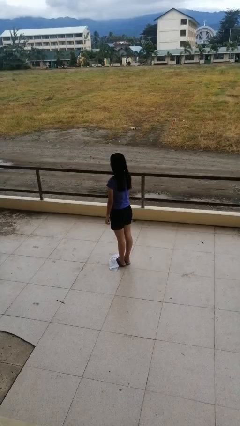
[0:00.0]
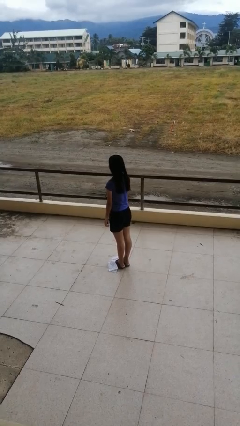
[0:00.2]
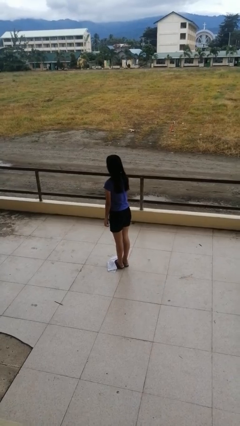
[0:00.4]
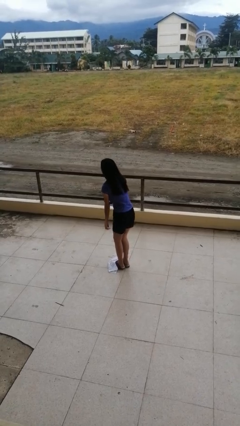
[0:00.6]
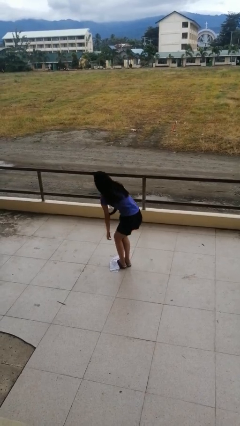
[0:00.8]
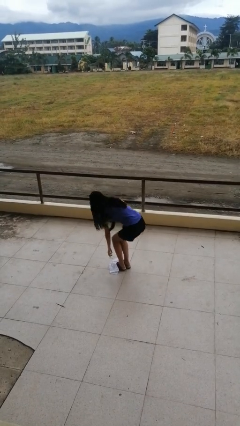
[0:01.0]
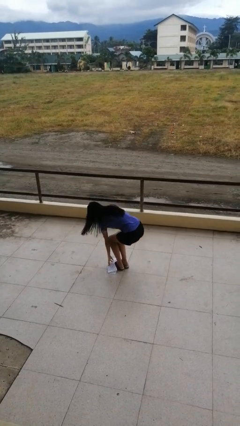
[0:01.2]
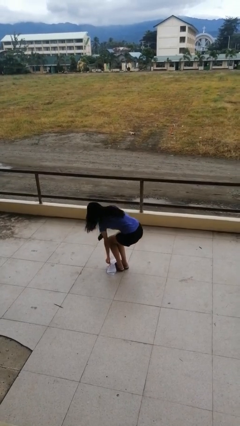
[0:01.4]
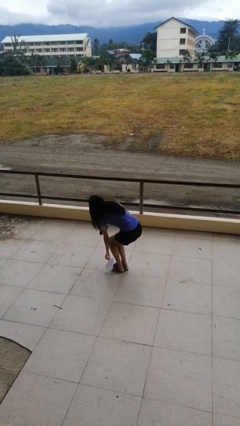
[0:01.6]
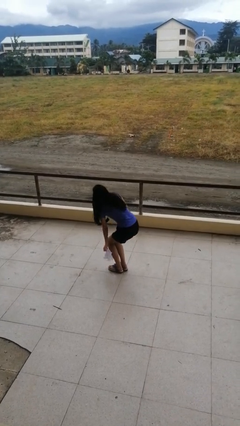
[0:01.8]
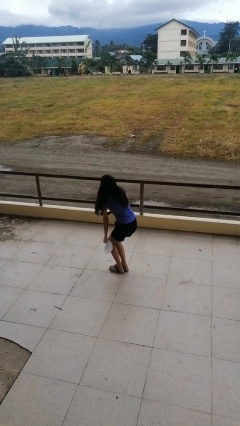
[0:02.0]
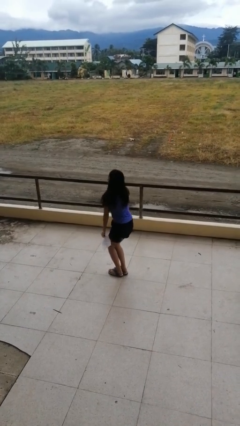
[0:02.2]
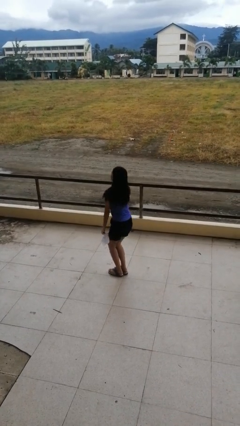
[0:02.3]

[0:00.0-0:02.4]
person picks up object from floor

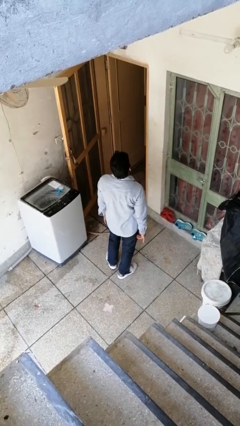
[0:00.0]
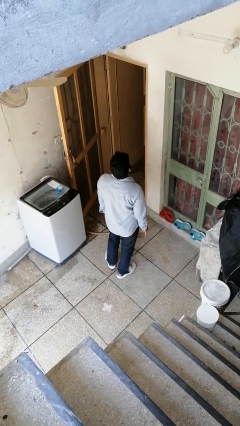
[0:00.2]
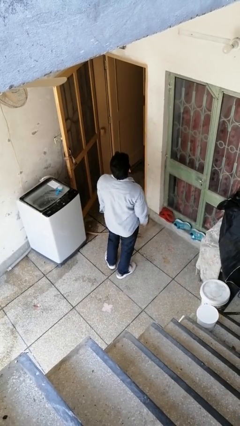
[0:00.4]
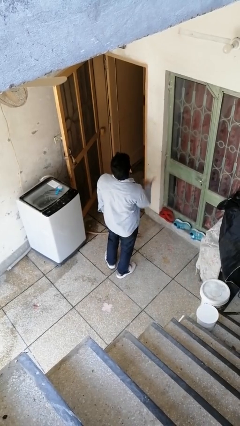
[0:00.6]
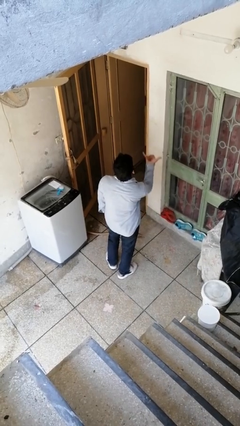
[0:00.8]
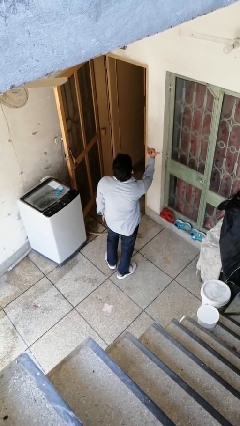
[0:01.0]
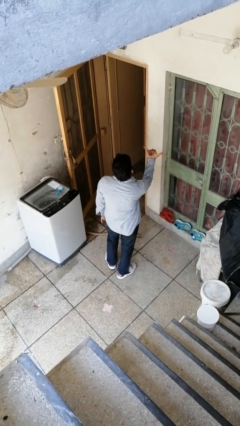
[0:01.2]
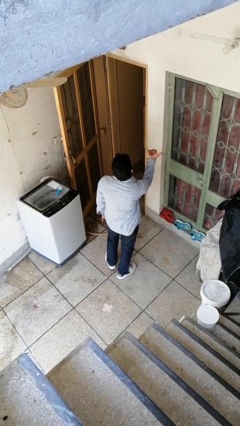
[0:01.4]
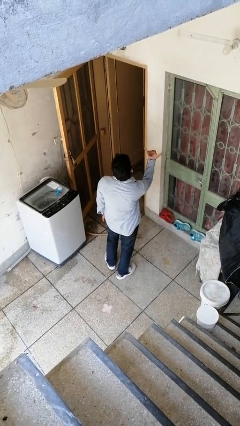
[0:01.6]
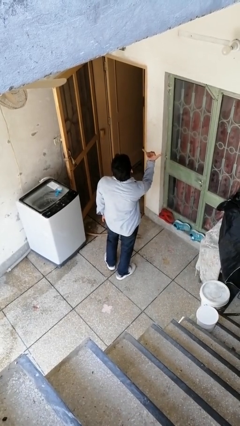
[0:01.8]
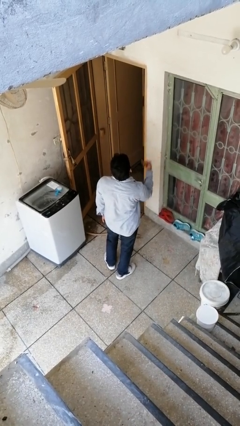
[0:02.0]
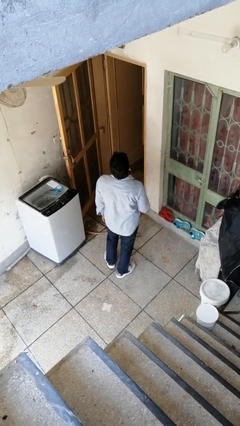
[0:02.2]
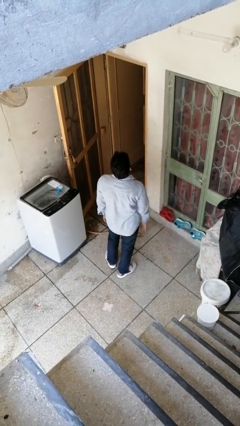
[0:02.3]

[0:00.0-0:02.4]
person gestures hang loose

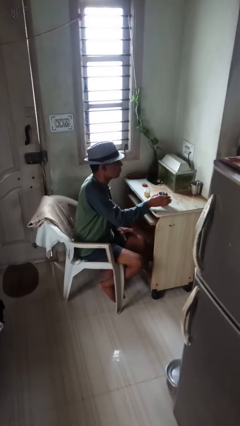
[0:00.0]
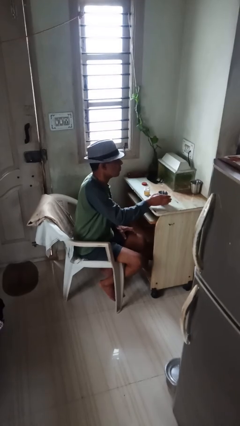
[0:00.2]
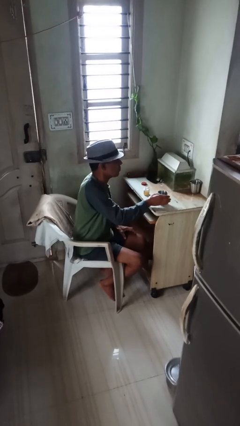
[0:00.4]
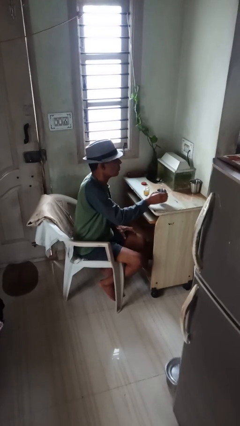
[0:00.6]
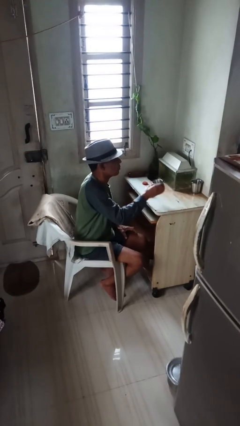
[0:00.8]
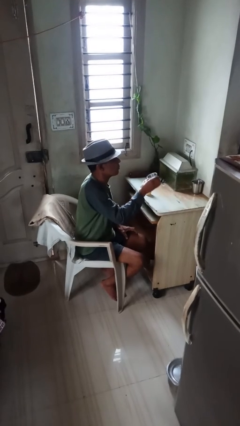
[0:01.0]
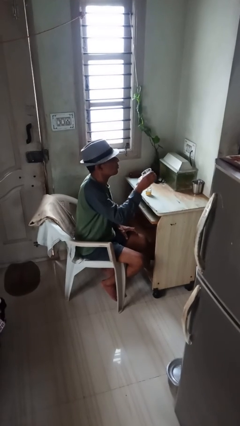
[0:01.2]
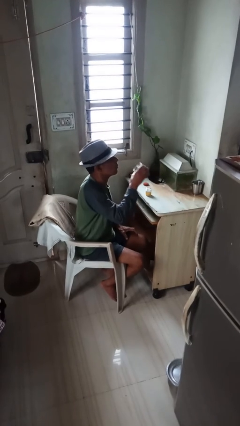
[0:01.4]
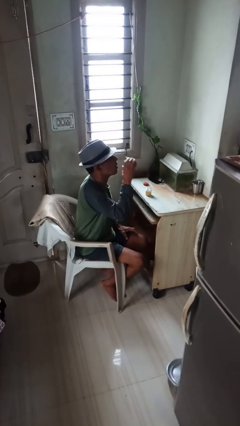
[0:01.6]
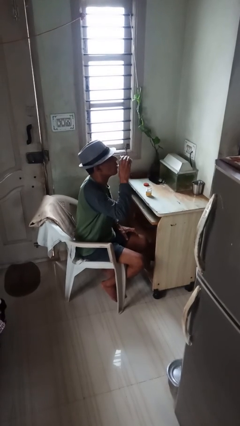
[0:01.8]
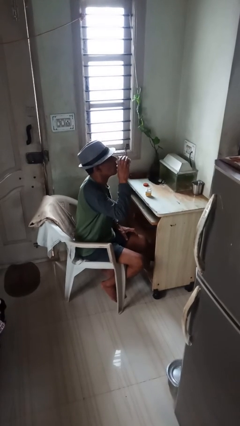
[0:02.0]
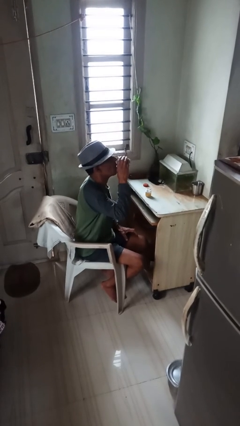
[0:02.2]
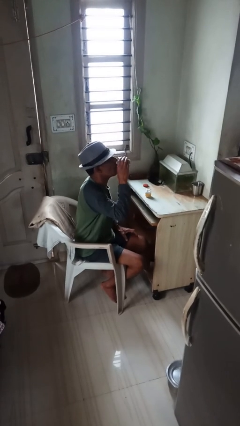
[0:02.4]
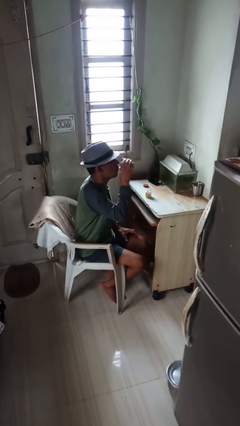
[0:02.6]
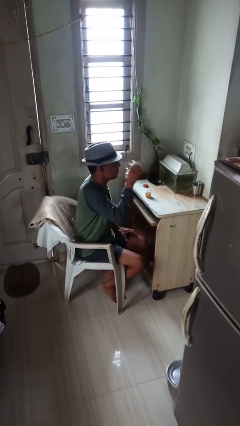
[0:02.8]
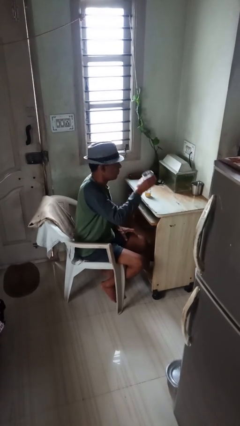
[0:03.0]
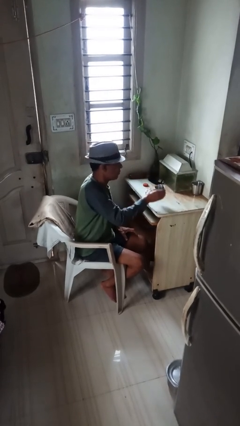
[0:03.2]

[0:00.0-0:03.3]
person drinks from cup

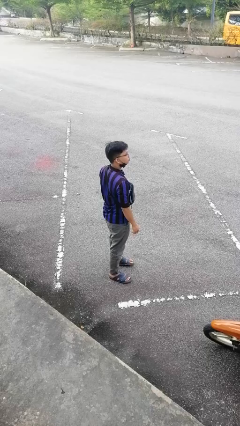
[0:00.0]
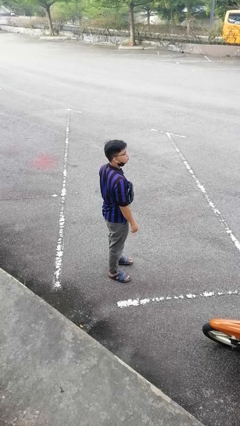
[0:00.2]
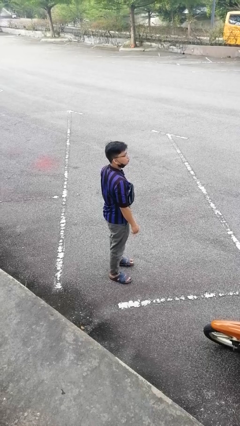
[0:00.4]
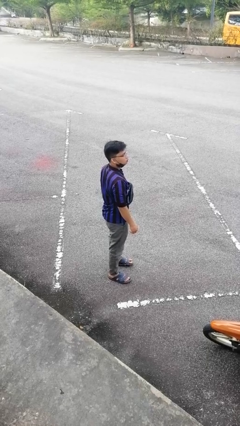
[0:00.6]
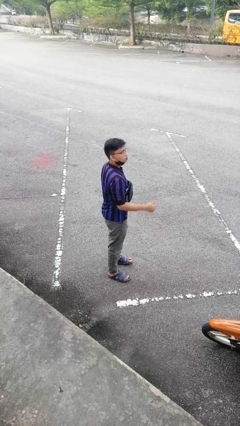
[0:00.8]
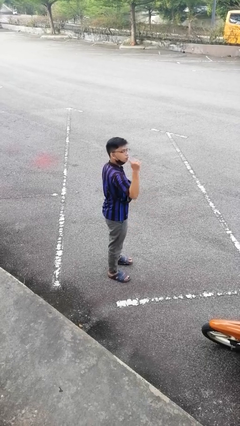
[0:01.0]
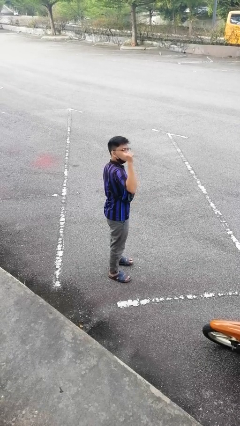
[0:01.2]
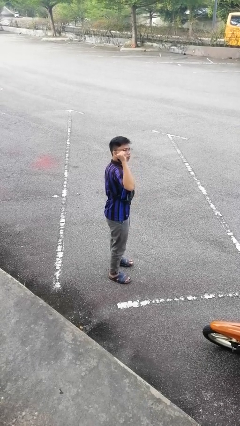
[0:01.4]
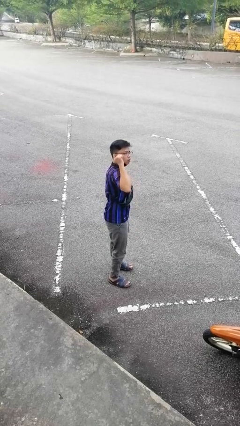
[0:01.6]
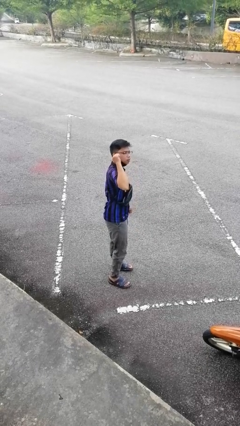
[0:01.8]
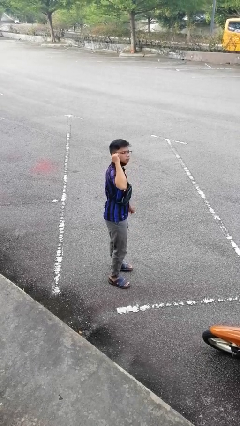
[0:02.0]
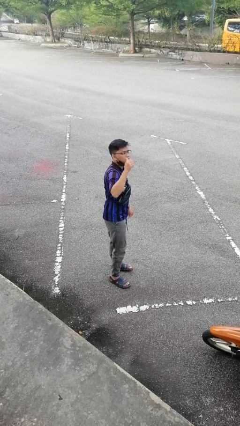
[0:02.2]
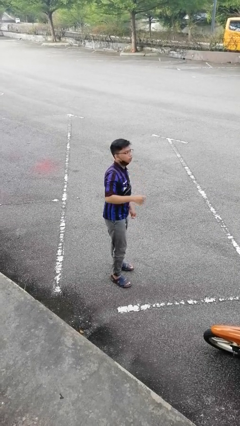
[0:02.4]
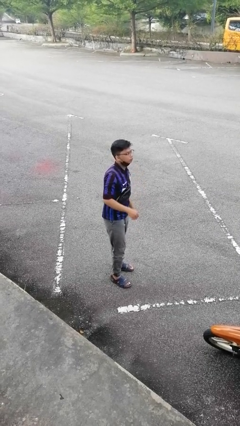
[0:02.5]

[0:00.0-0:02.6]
person gestures behind me

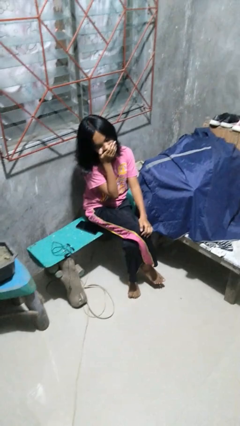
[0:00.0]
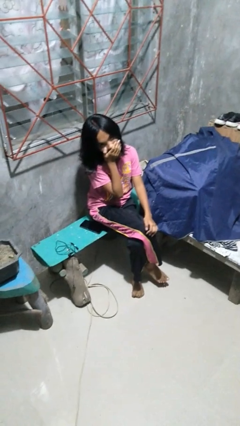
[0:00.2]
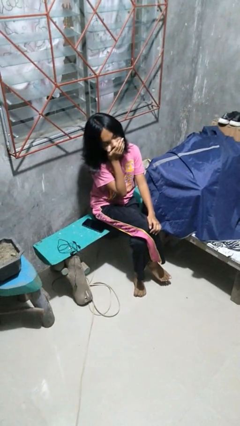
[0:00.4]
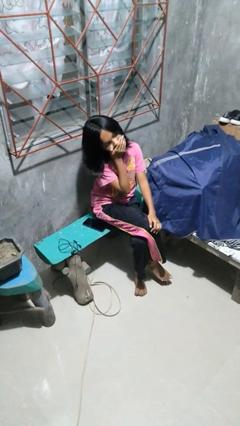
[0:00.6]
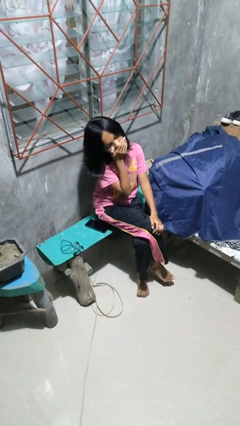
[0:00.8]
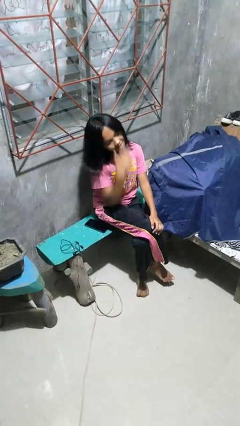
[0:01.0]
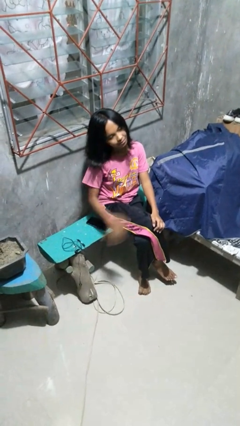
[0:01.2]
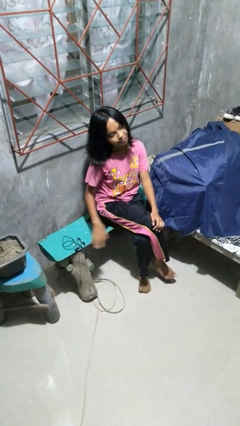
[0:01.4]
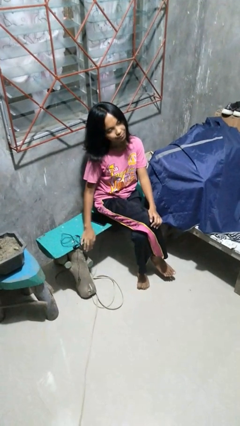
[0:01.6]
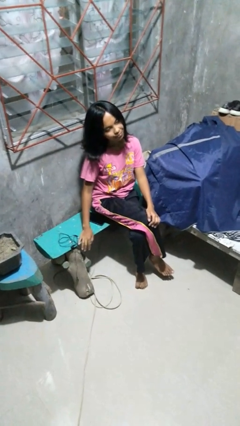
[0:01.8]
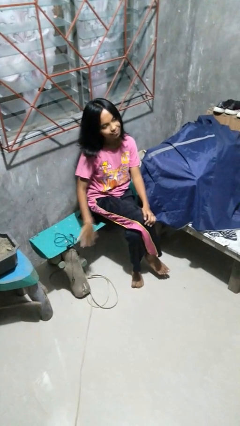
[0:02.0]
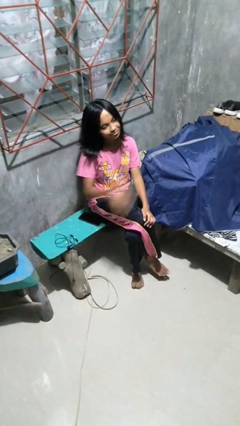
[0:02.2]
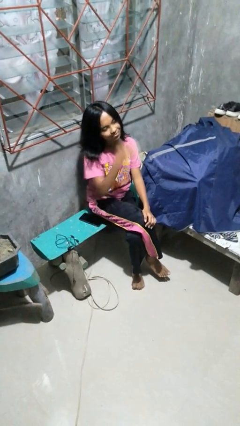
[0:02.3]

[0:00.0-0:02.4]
person yawns

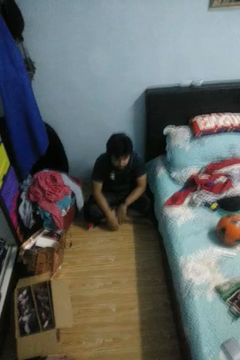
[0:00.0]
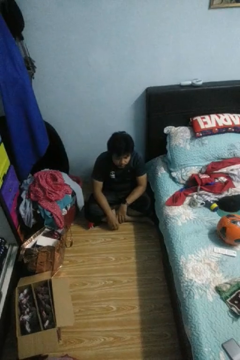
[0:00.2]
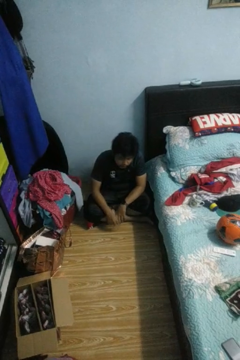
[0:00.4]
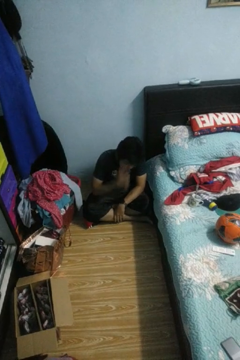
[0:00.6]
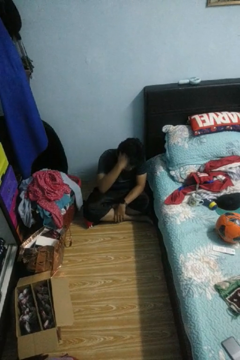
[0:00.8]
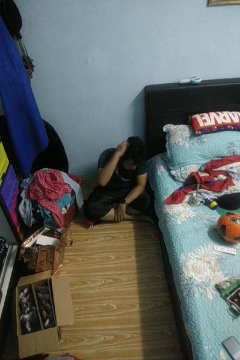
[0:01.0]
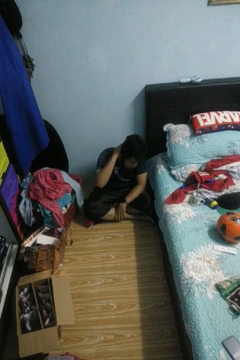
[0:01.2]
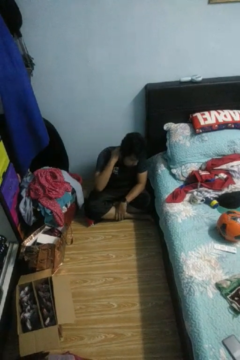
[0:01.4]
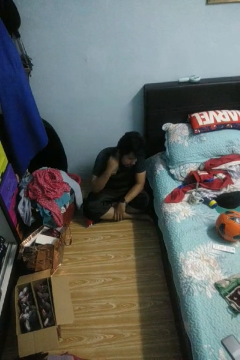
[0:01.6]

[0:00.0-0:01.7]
person strokes hair

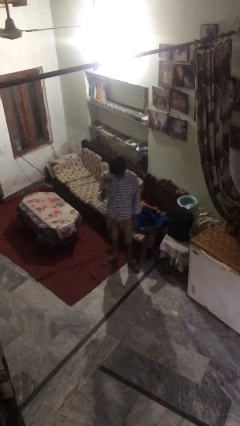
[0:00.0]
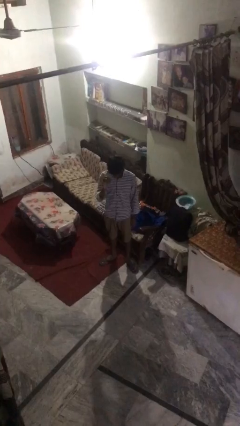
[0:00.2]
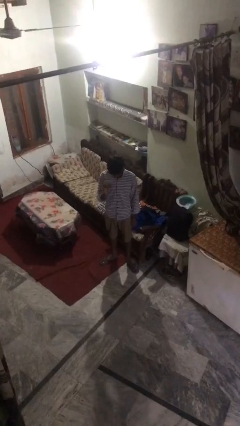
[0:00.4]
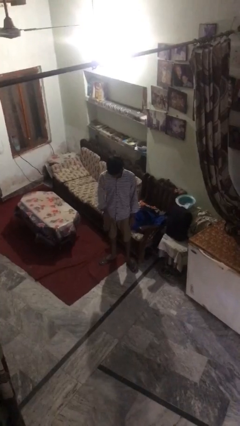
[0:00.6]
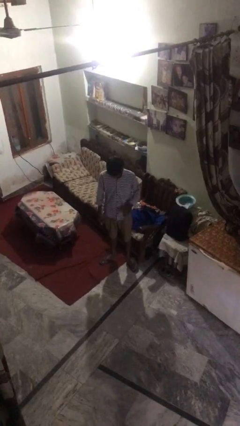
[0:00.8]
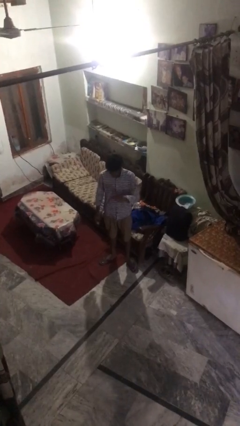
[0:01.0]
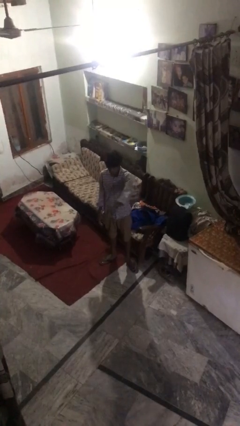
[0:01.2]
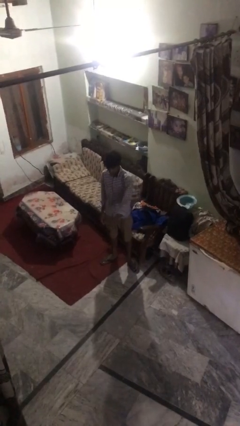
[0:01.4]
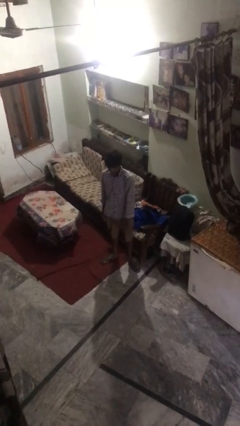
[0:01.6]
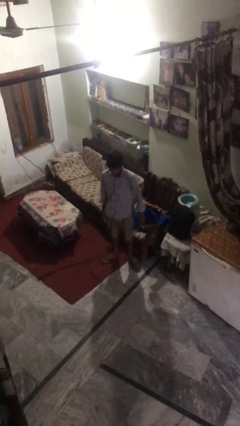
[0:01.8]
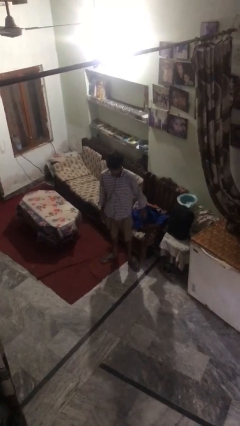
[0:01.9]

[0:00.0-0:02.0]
person bounces ball on floor

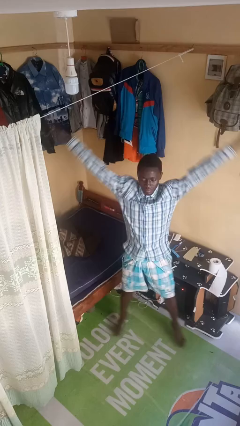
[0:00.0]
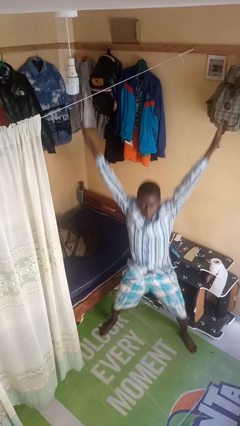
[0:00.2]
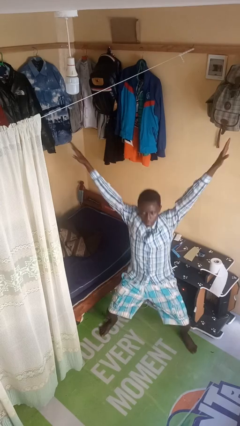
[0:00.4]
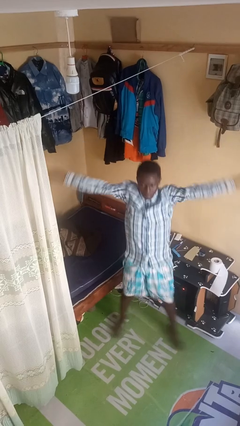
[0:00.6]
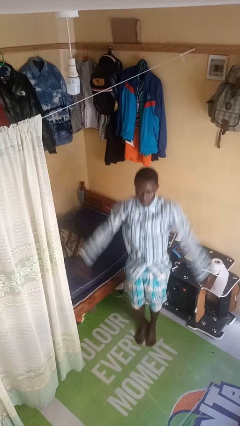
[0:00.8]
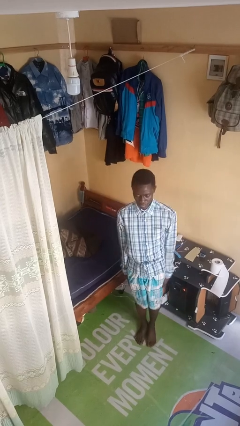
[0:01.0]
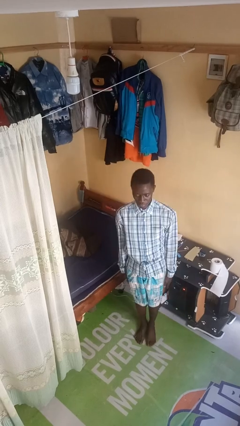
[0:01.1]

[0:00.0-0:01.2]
person exercises with jumping jacks
